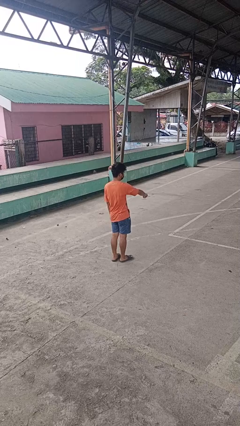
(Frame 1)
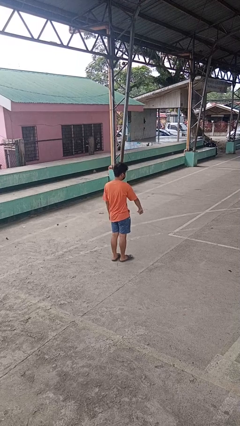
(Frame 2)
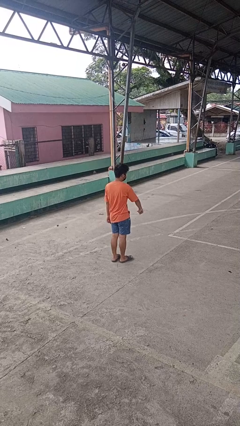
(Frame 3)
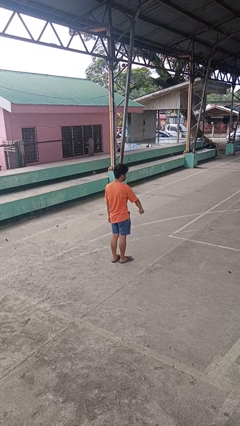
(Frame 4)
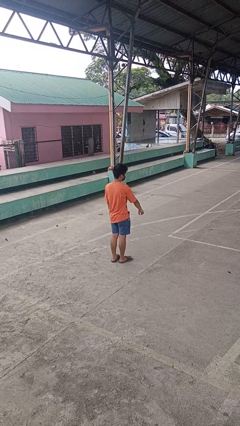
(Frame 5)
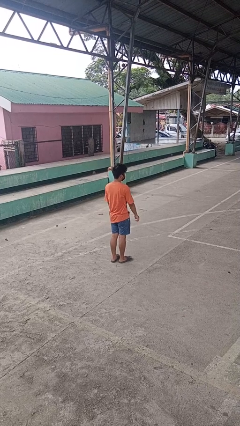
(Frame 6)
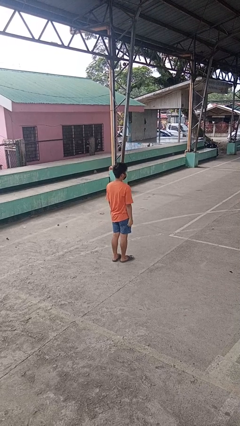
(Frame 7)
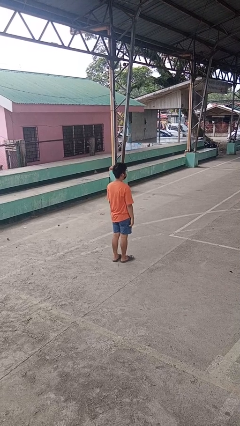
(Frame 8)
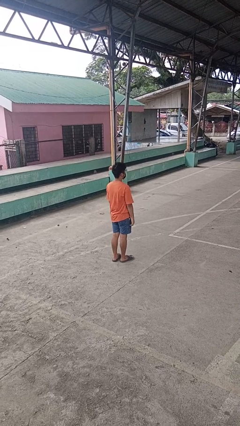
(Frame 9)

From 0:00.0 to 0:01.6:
person gestures swipe down

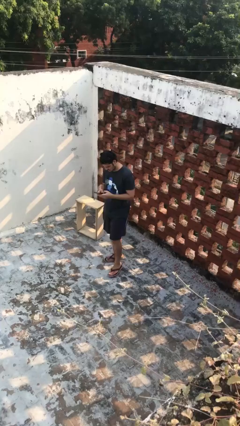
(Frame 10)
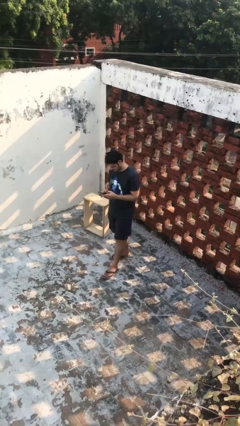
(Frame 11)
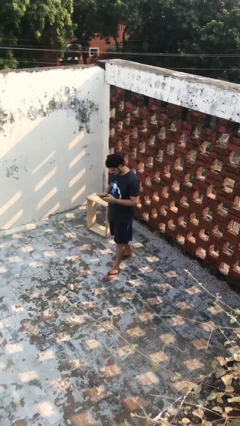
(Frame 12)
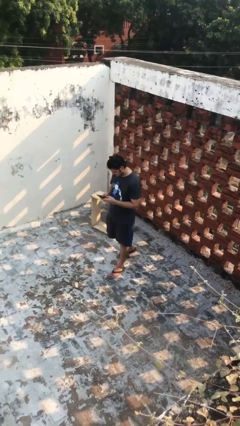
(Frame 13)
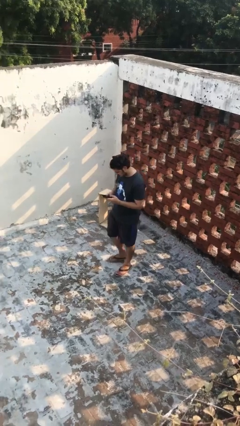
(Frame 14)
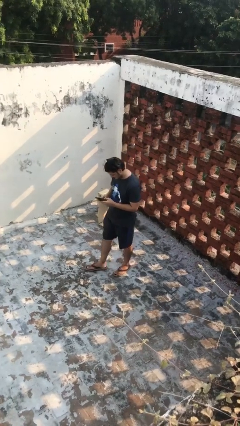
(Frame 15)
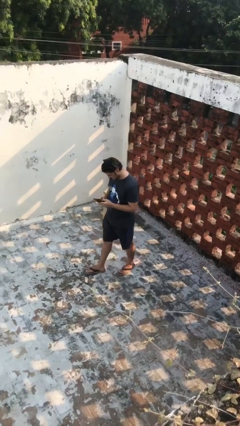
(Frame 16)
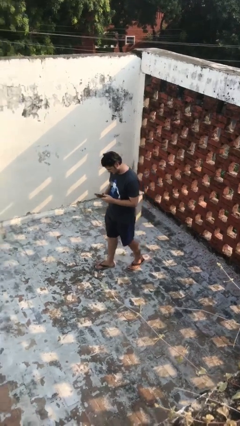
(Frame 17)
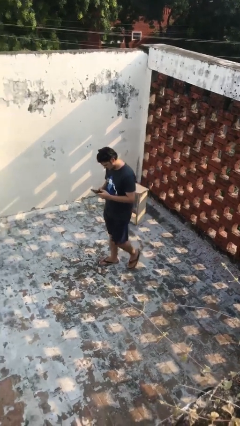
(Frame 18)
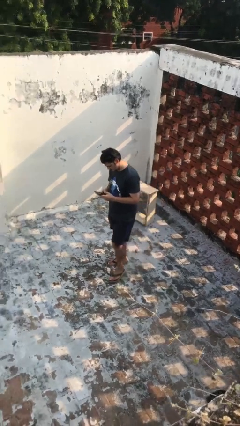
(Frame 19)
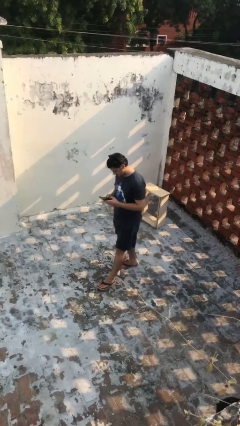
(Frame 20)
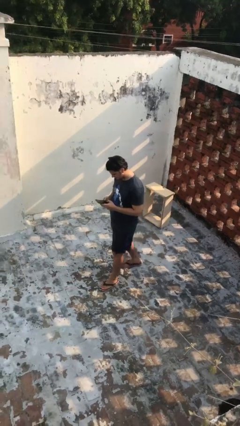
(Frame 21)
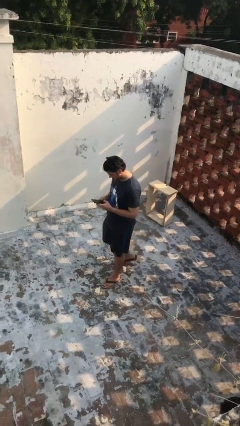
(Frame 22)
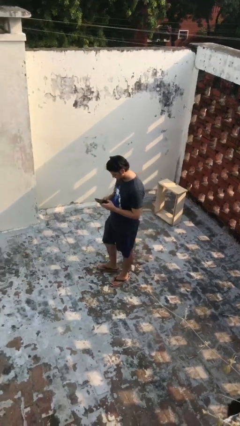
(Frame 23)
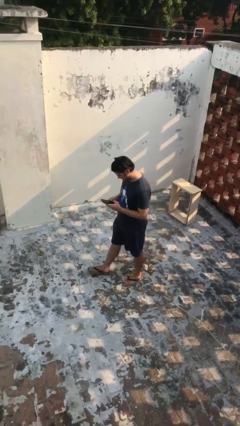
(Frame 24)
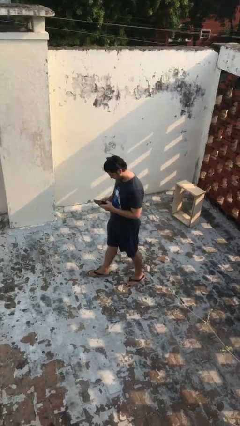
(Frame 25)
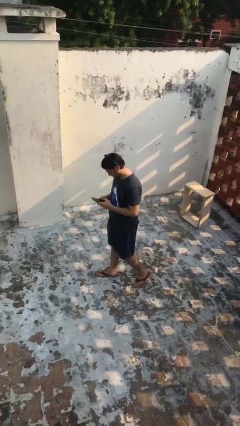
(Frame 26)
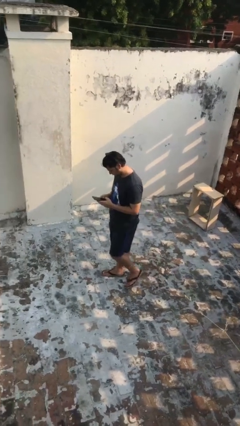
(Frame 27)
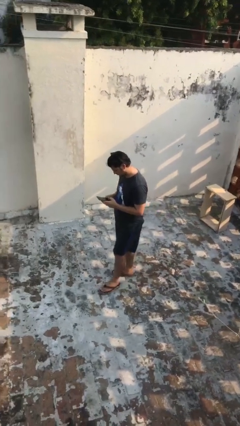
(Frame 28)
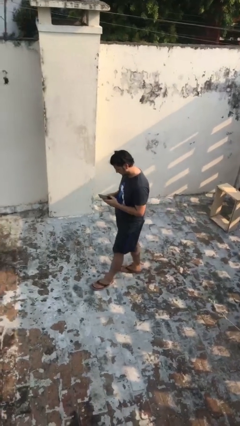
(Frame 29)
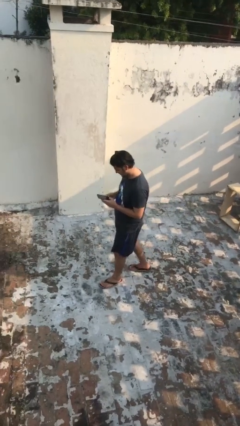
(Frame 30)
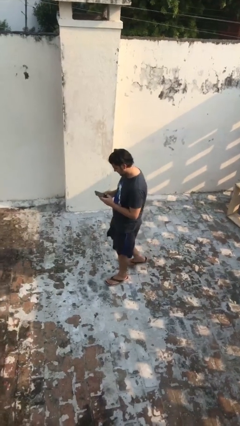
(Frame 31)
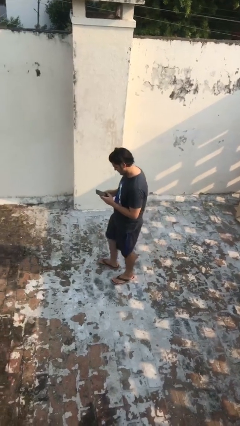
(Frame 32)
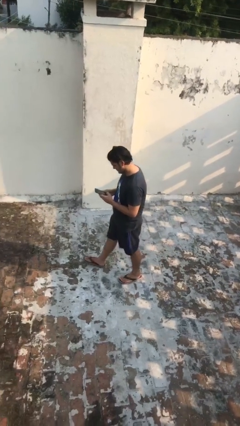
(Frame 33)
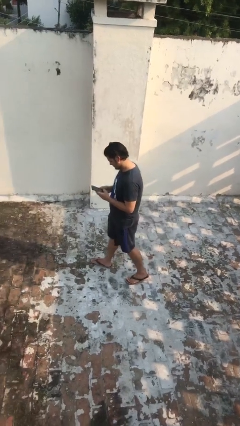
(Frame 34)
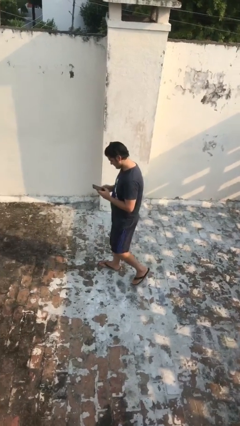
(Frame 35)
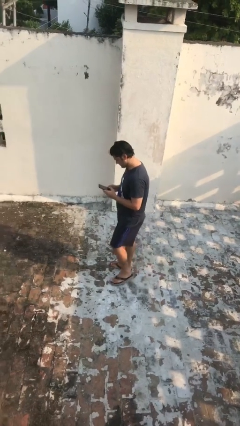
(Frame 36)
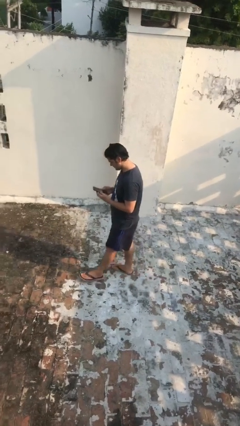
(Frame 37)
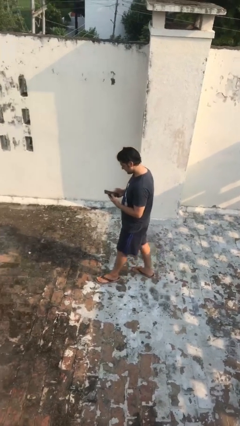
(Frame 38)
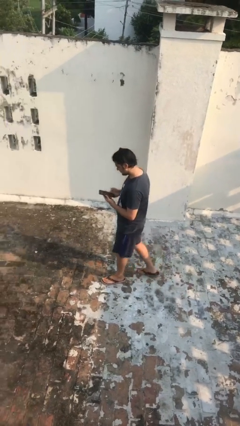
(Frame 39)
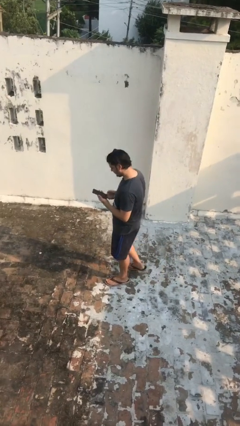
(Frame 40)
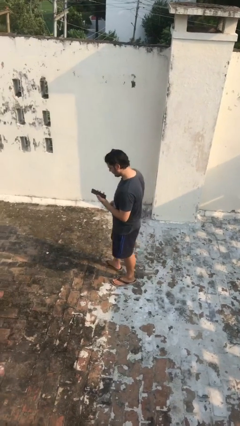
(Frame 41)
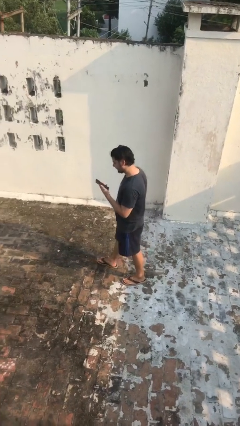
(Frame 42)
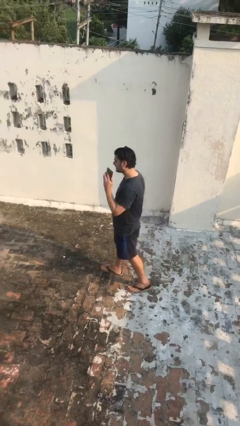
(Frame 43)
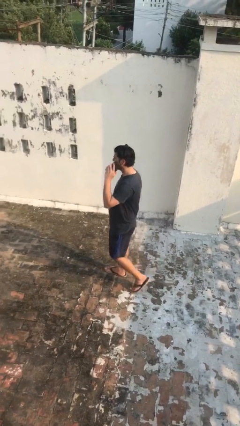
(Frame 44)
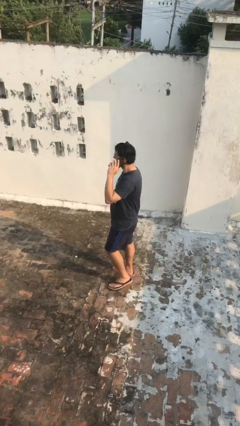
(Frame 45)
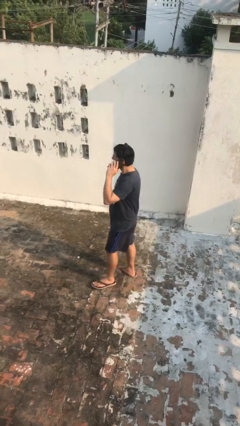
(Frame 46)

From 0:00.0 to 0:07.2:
person texts on phone

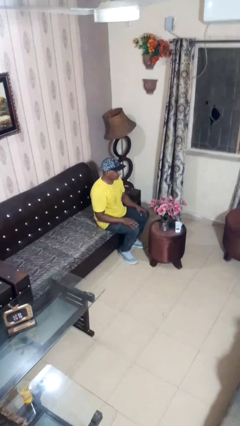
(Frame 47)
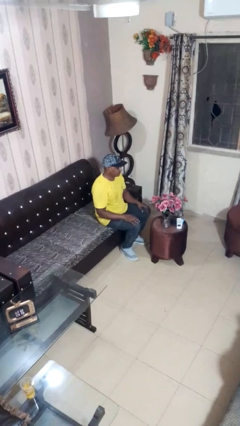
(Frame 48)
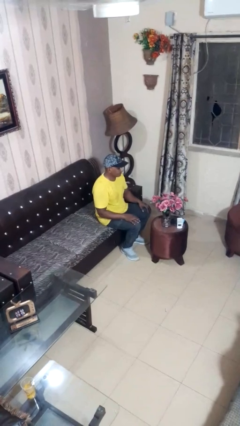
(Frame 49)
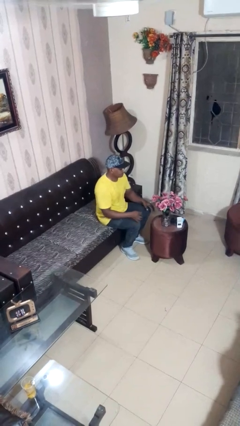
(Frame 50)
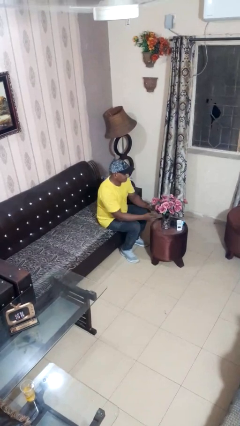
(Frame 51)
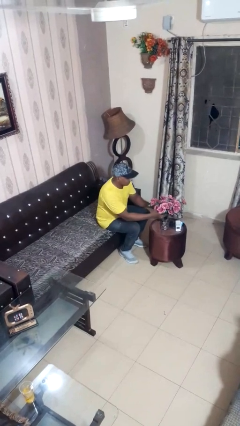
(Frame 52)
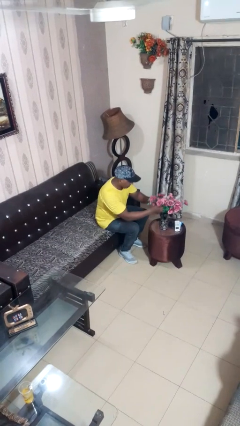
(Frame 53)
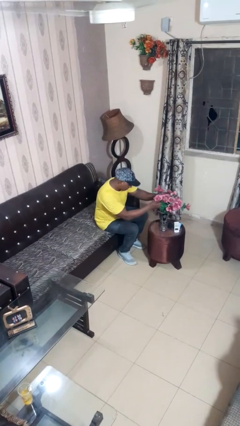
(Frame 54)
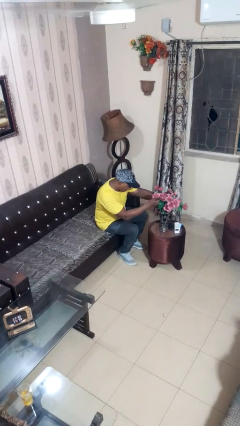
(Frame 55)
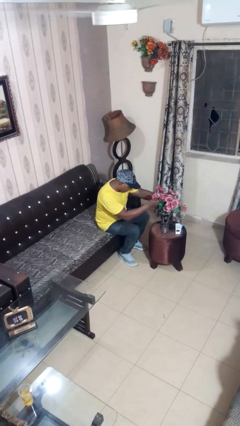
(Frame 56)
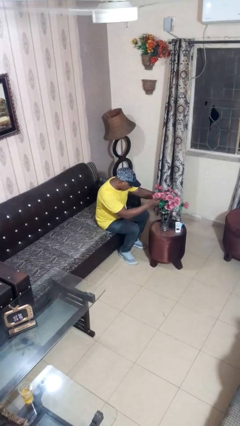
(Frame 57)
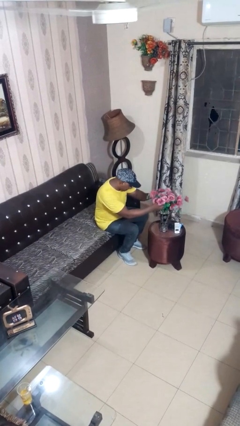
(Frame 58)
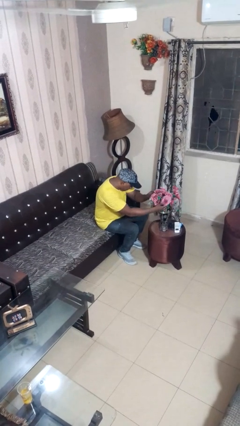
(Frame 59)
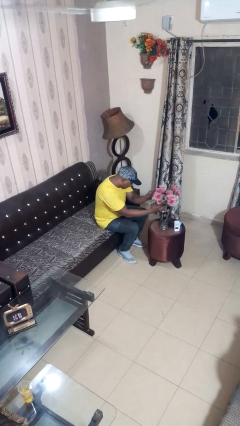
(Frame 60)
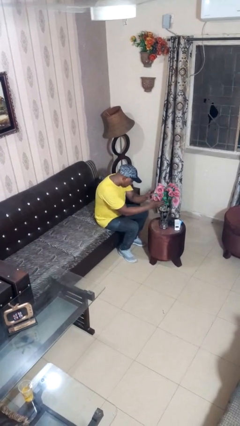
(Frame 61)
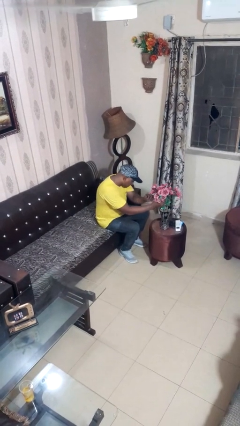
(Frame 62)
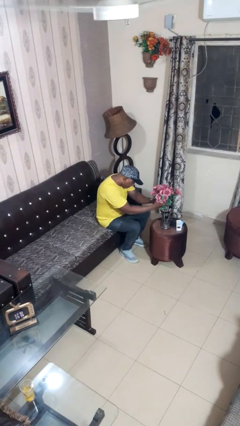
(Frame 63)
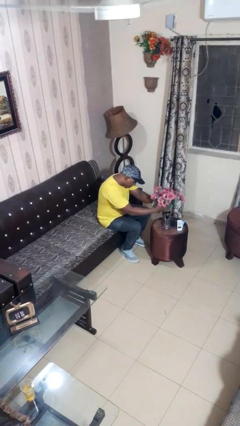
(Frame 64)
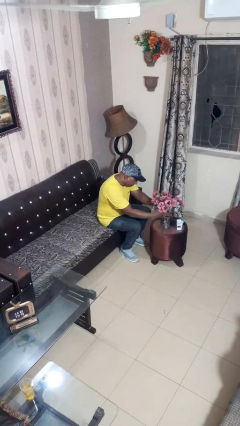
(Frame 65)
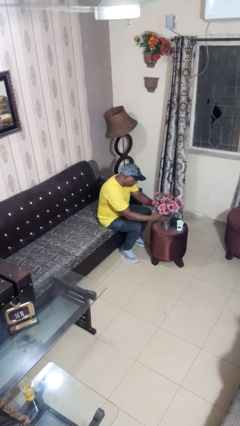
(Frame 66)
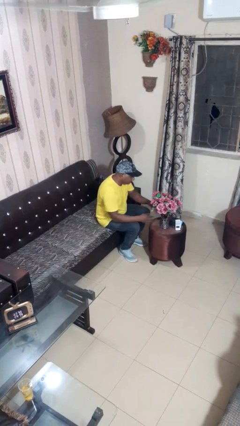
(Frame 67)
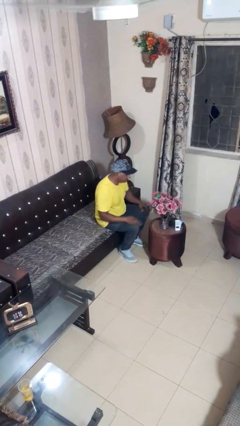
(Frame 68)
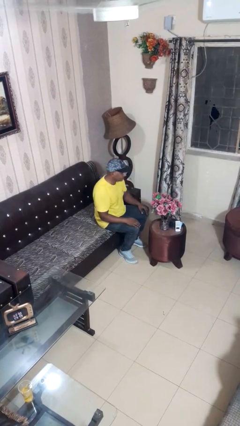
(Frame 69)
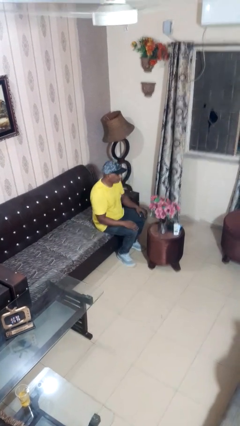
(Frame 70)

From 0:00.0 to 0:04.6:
person arranges flowers in vase

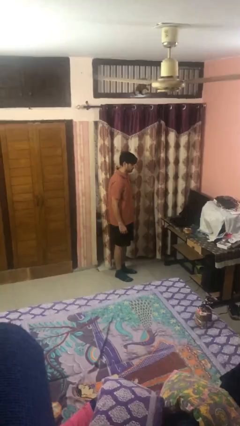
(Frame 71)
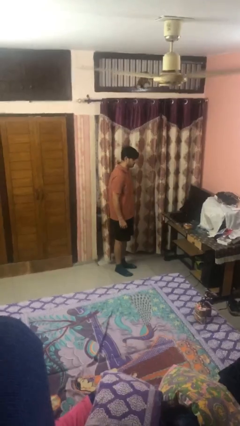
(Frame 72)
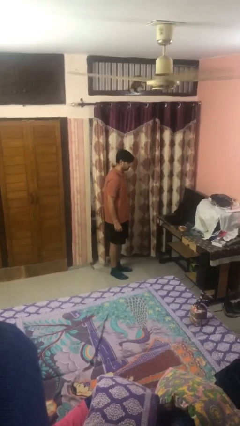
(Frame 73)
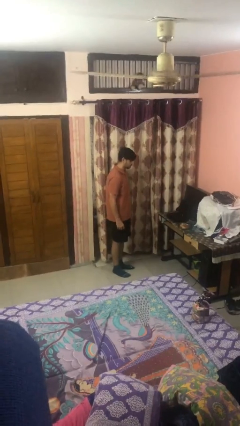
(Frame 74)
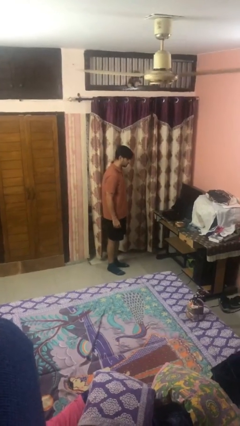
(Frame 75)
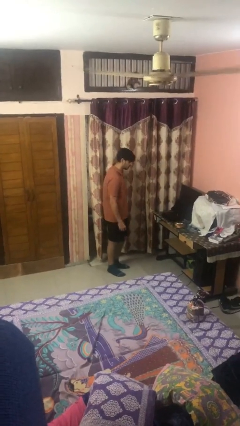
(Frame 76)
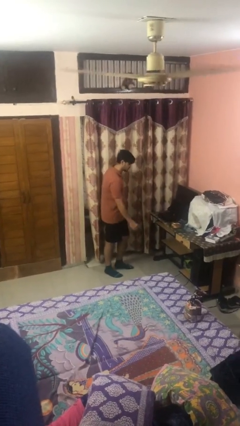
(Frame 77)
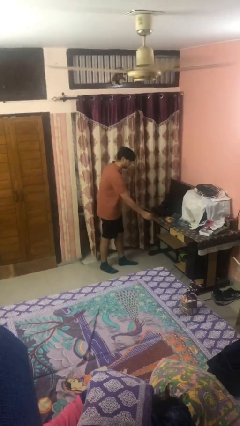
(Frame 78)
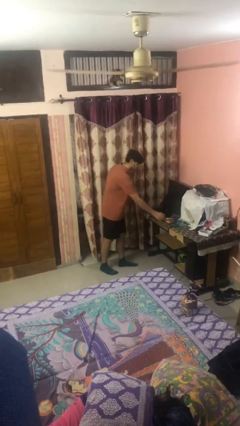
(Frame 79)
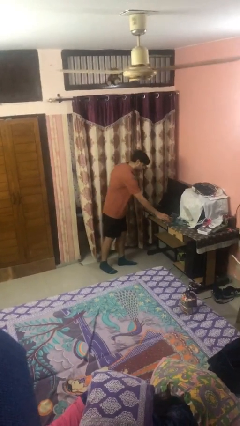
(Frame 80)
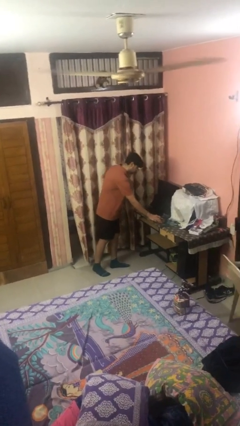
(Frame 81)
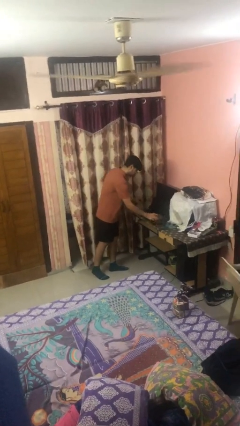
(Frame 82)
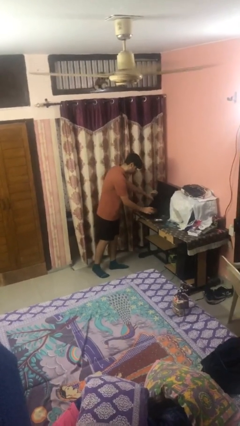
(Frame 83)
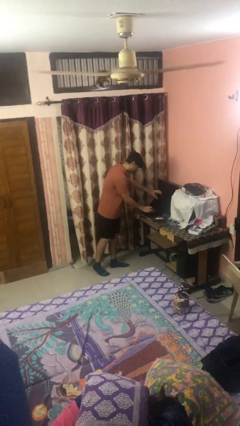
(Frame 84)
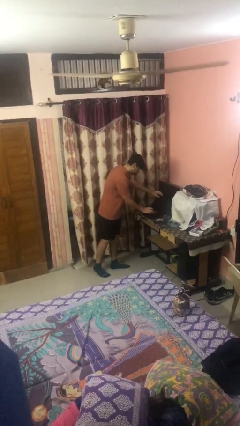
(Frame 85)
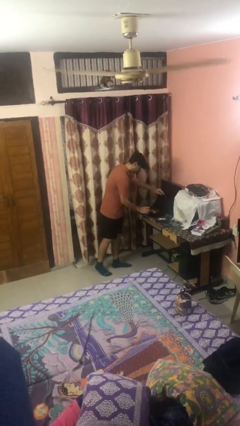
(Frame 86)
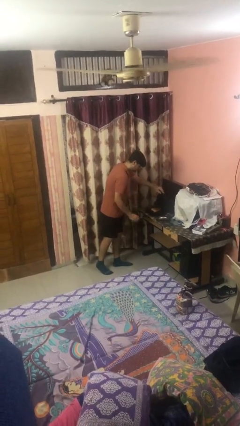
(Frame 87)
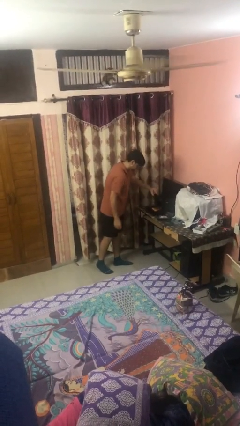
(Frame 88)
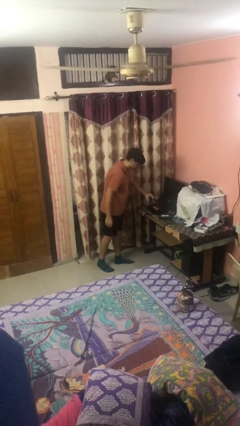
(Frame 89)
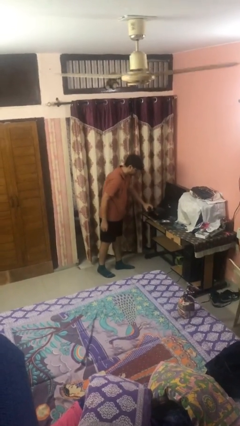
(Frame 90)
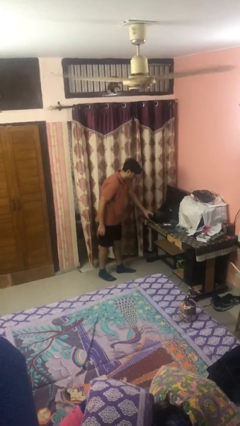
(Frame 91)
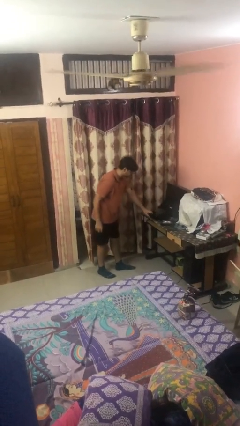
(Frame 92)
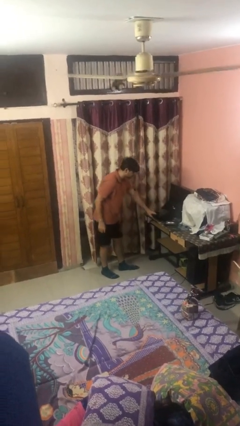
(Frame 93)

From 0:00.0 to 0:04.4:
person puts object into toaster

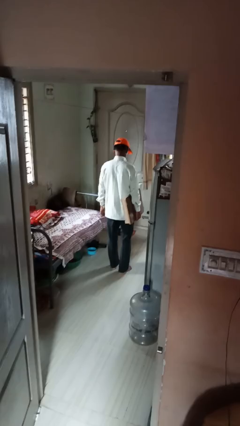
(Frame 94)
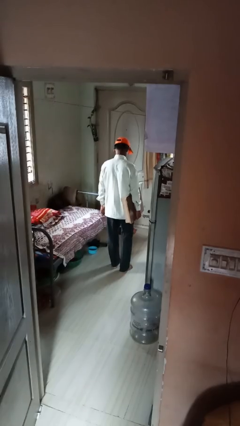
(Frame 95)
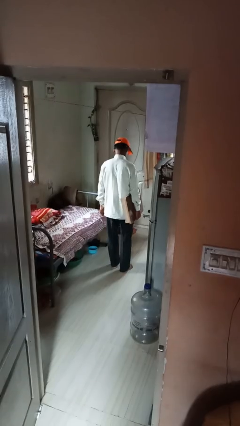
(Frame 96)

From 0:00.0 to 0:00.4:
person carries furniture
